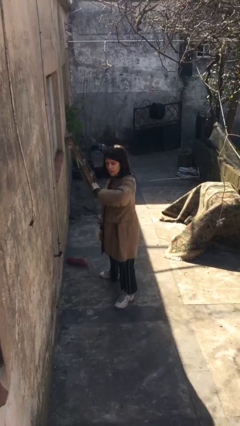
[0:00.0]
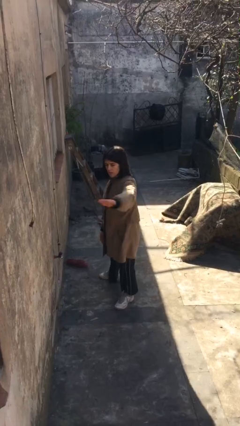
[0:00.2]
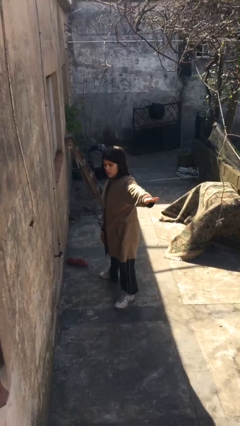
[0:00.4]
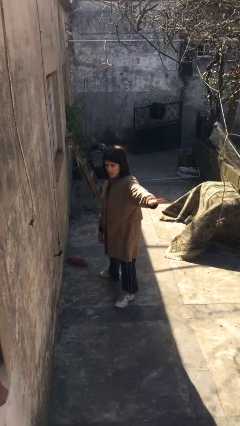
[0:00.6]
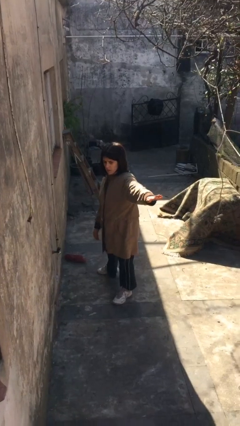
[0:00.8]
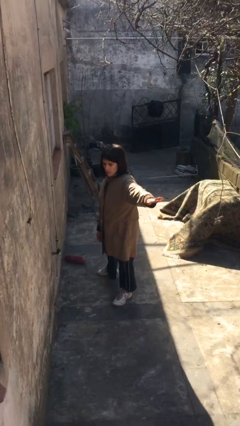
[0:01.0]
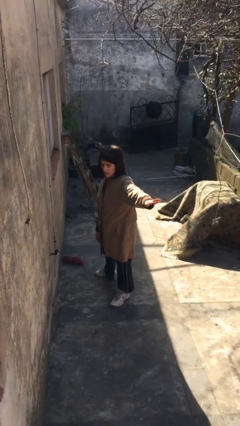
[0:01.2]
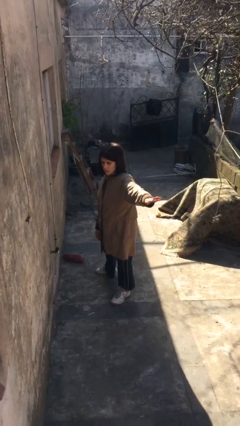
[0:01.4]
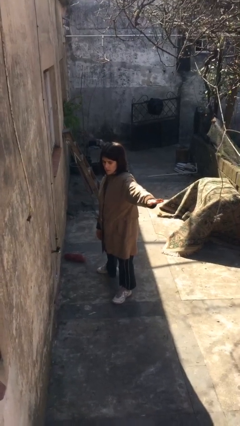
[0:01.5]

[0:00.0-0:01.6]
person karate chop

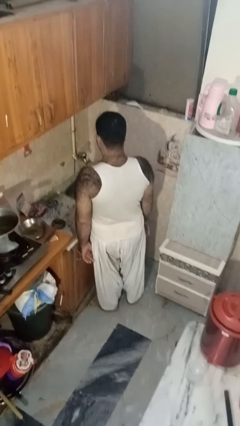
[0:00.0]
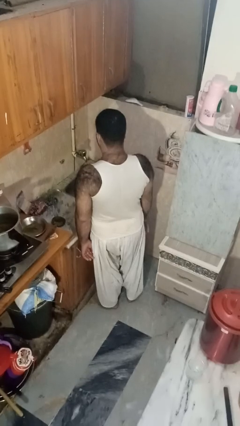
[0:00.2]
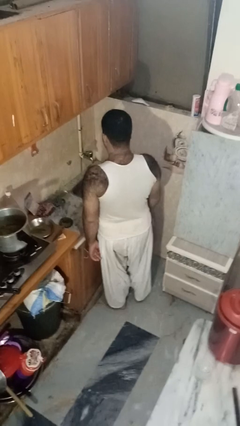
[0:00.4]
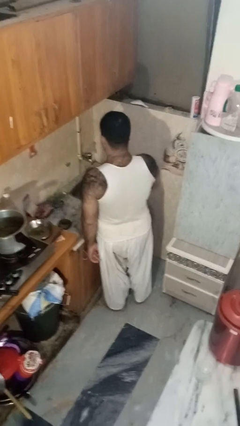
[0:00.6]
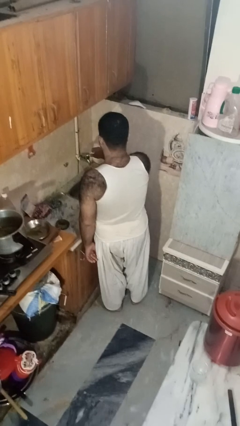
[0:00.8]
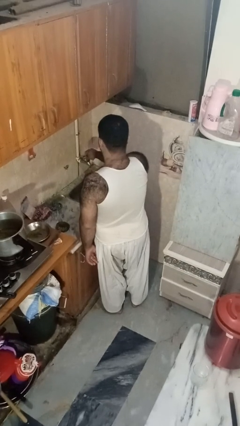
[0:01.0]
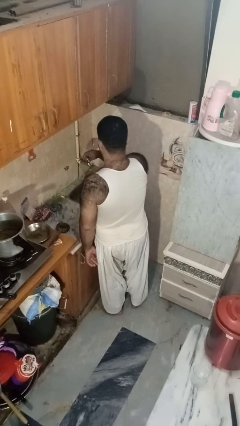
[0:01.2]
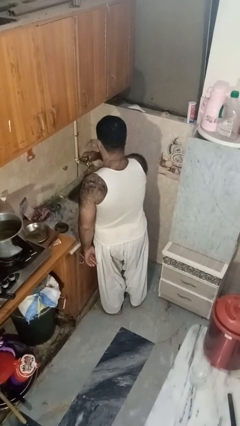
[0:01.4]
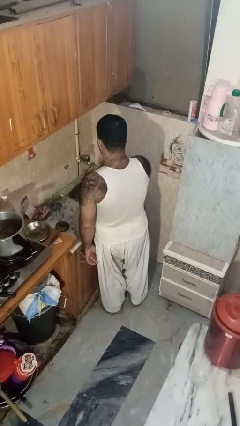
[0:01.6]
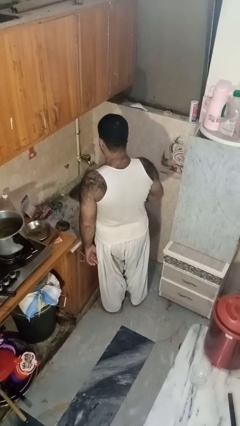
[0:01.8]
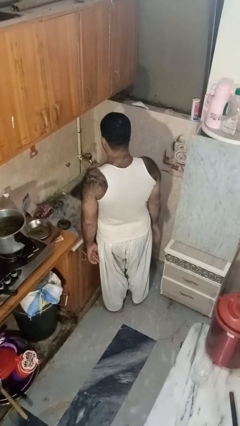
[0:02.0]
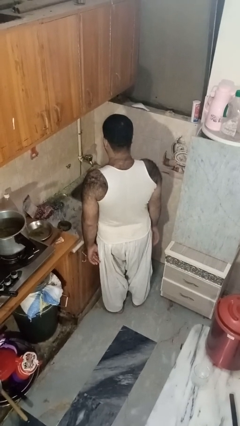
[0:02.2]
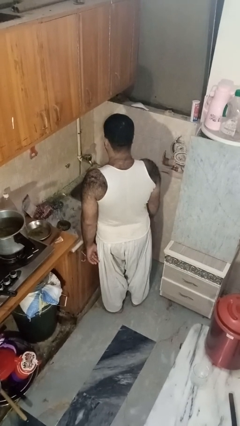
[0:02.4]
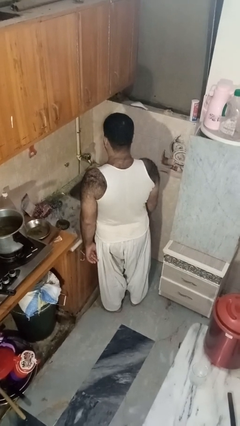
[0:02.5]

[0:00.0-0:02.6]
person turns on faucet

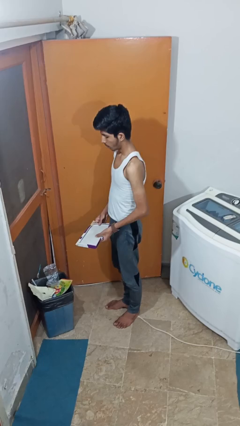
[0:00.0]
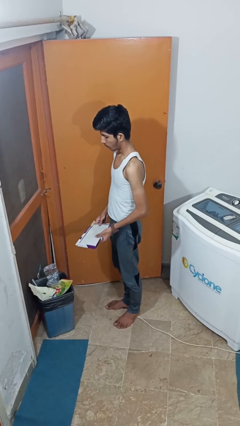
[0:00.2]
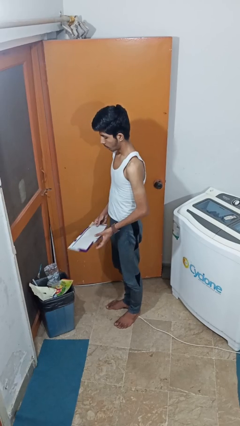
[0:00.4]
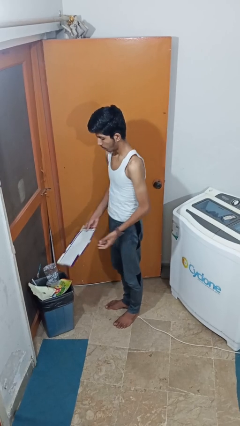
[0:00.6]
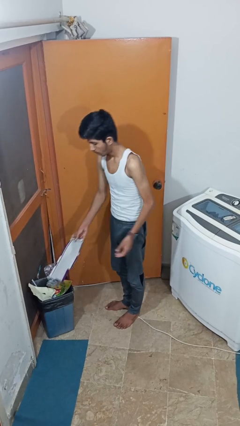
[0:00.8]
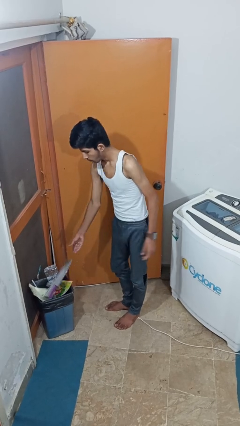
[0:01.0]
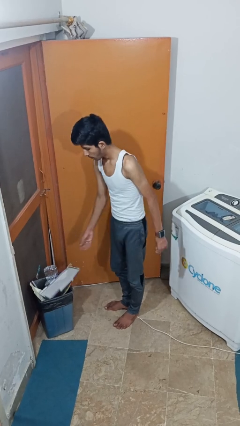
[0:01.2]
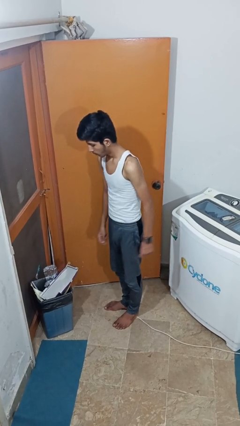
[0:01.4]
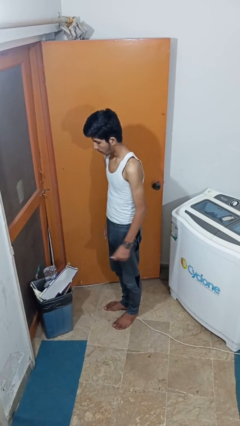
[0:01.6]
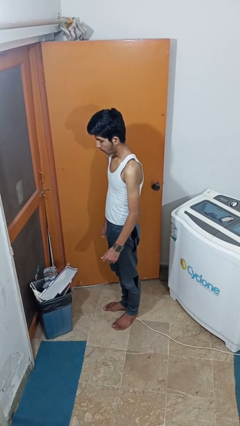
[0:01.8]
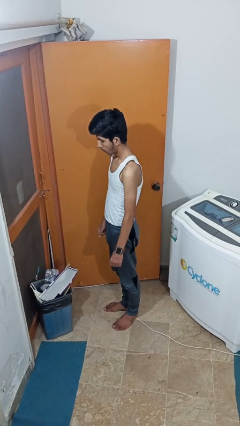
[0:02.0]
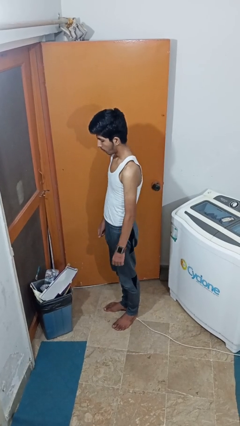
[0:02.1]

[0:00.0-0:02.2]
person discards trash

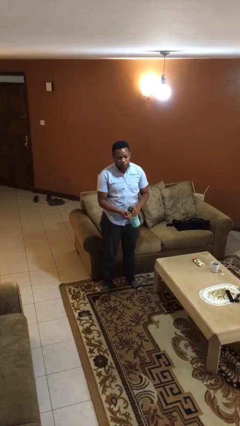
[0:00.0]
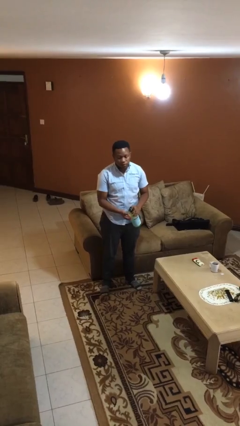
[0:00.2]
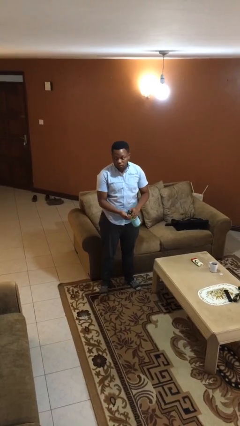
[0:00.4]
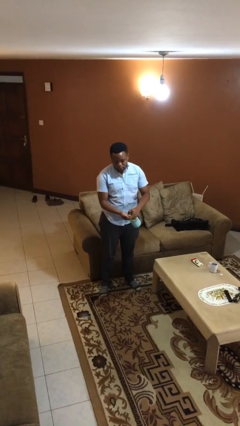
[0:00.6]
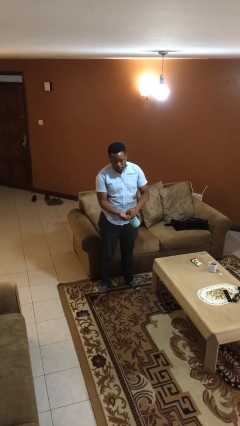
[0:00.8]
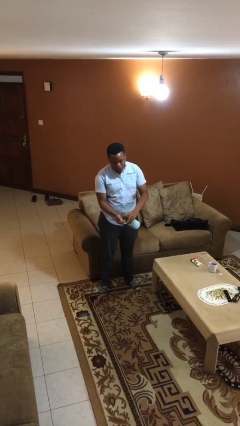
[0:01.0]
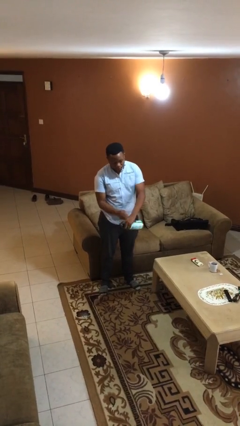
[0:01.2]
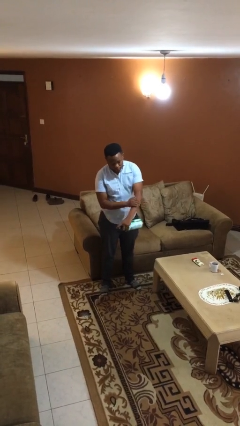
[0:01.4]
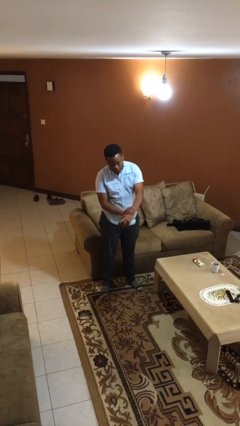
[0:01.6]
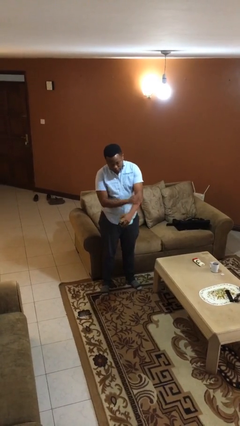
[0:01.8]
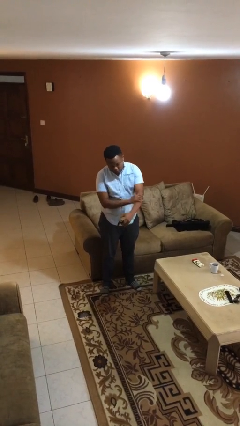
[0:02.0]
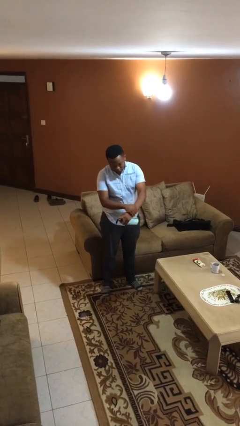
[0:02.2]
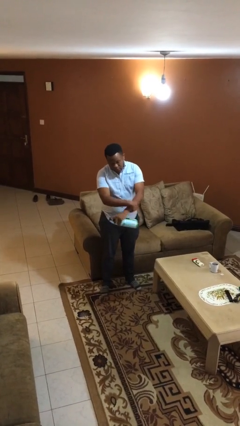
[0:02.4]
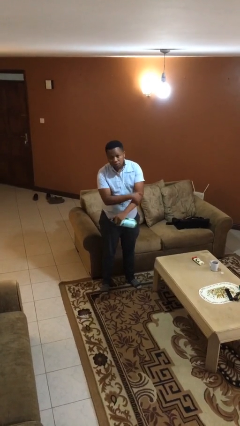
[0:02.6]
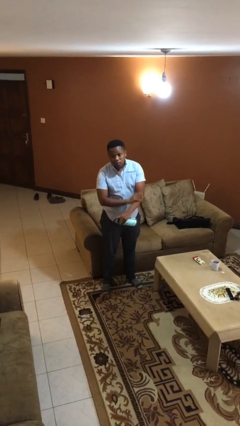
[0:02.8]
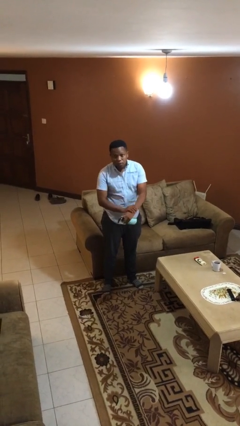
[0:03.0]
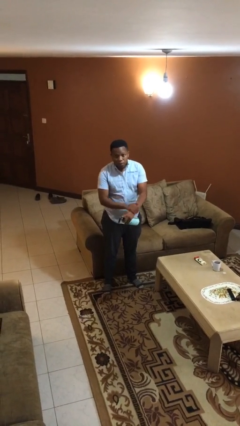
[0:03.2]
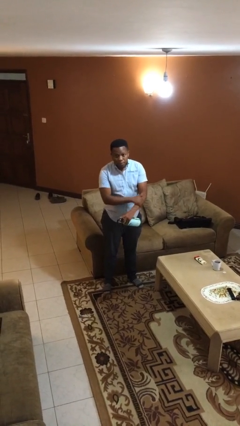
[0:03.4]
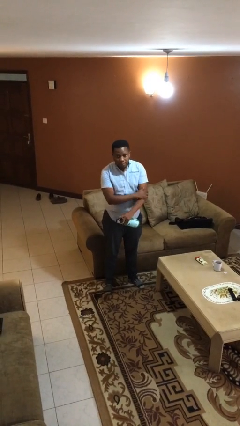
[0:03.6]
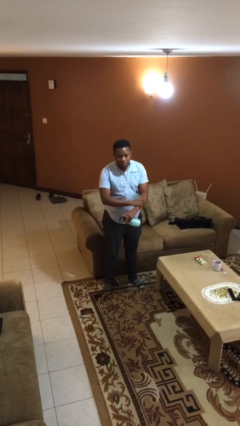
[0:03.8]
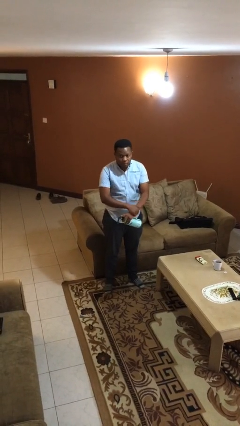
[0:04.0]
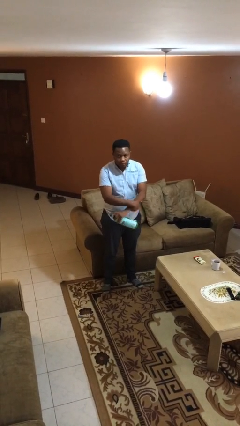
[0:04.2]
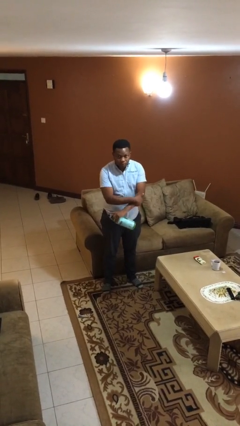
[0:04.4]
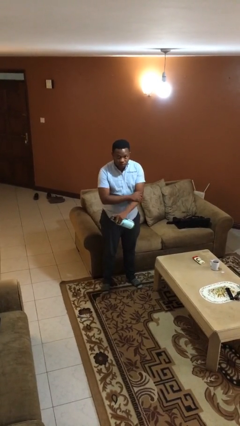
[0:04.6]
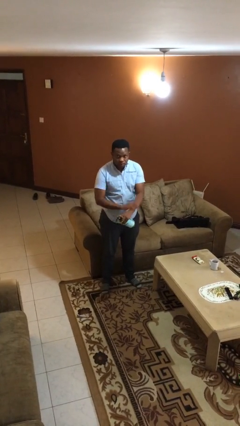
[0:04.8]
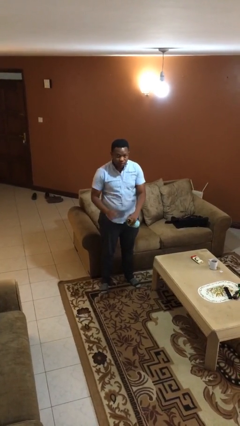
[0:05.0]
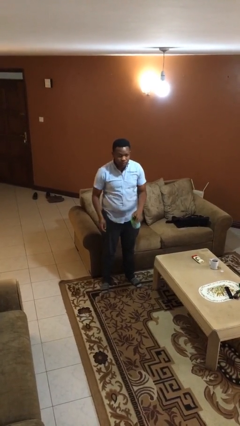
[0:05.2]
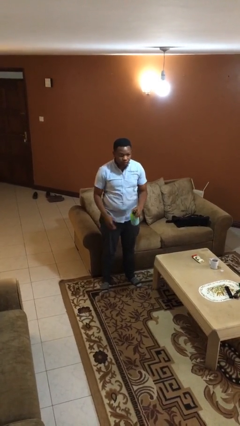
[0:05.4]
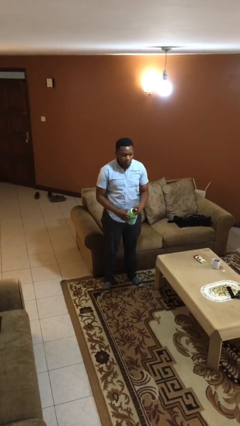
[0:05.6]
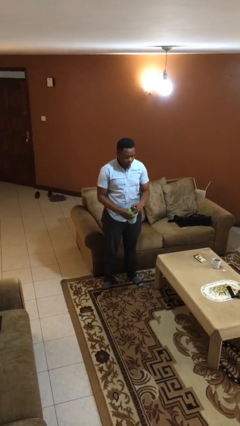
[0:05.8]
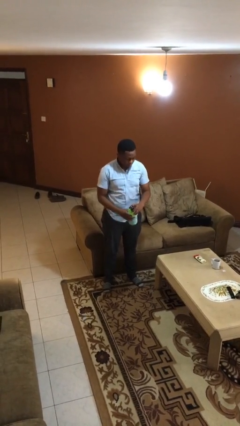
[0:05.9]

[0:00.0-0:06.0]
person applies sunscreen

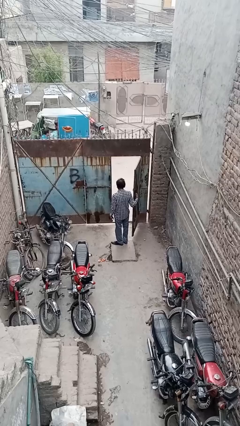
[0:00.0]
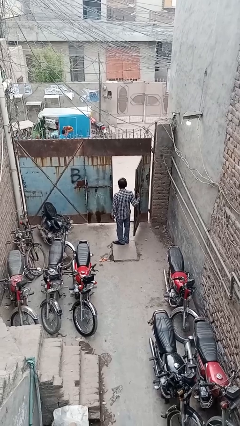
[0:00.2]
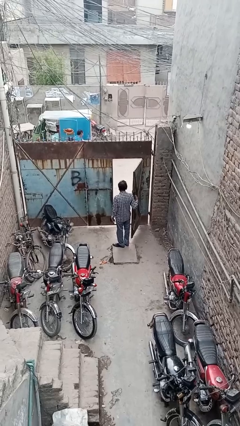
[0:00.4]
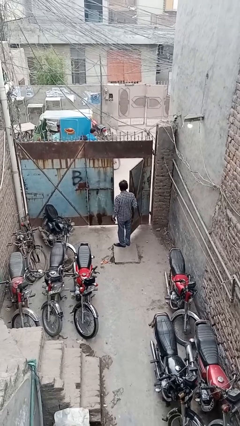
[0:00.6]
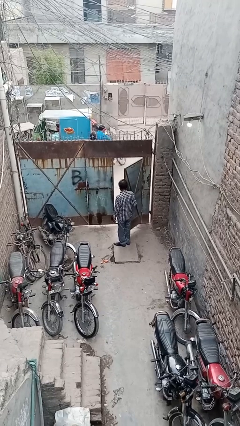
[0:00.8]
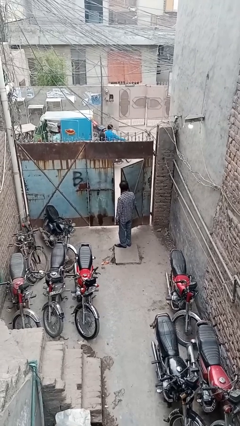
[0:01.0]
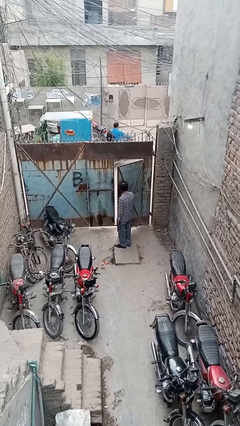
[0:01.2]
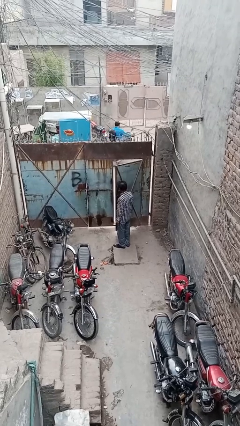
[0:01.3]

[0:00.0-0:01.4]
person closes facility door

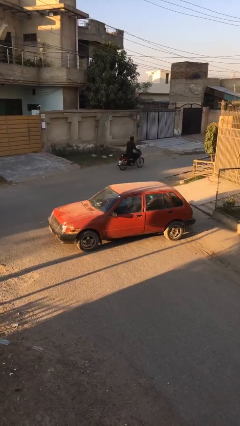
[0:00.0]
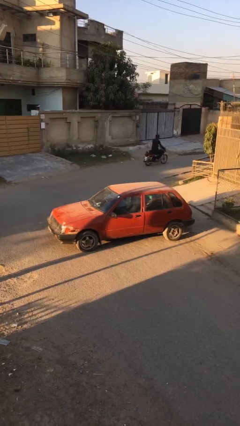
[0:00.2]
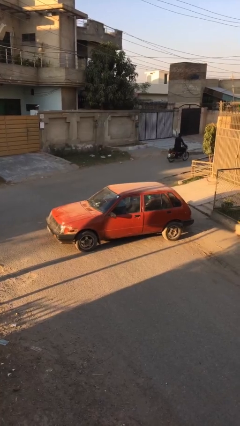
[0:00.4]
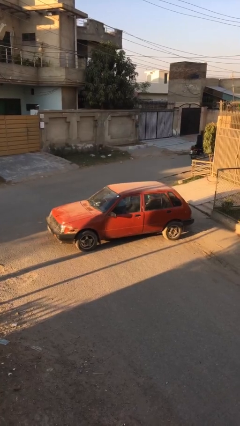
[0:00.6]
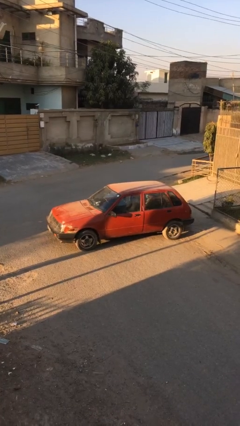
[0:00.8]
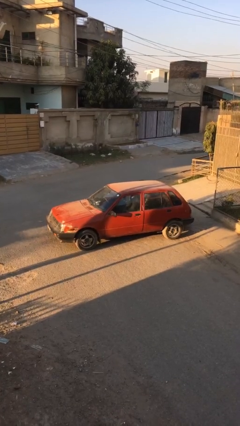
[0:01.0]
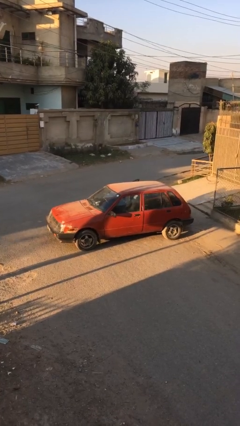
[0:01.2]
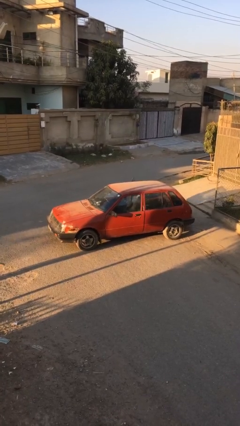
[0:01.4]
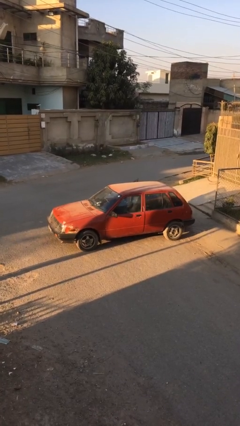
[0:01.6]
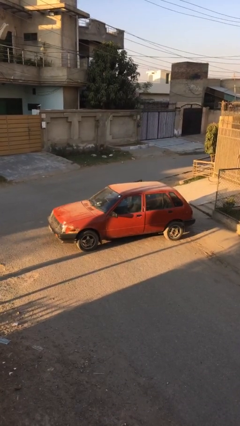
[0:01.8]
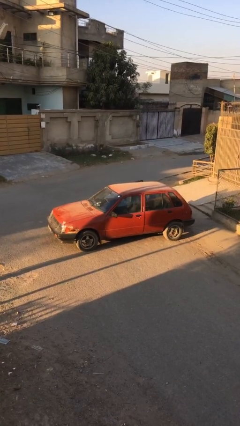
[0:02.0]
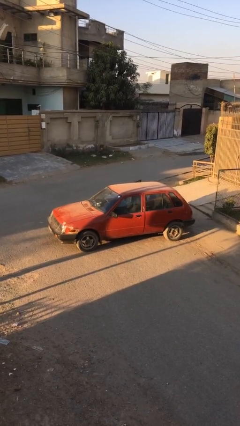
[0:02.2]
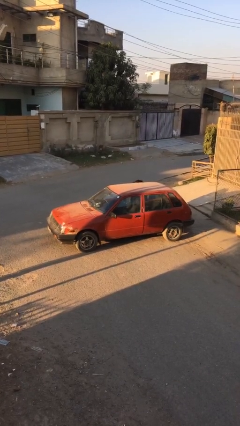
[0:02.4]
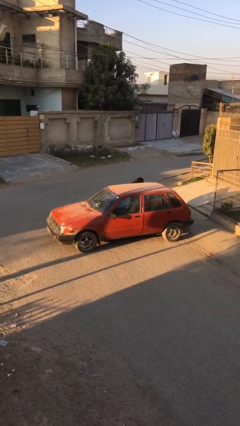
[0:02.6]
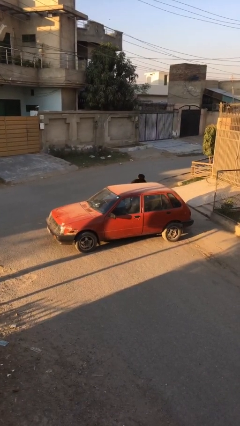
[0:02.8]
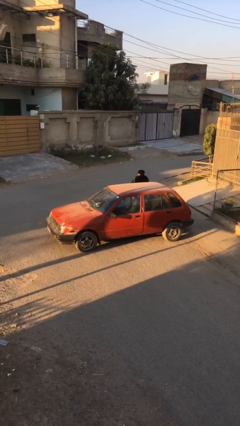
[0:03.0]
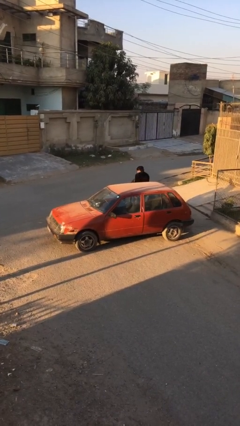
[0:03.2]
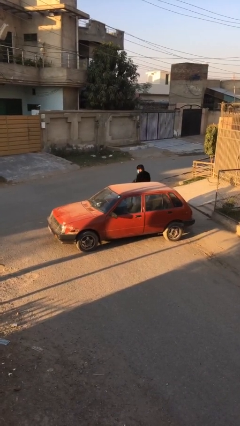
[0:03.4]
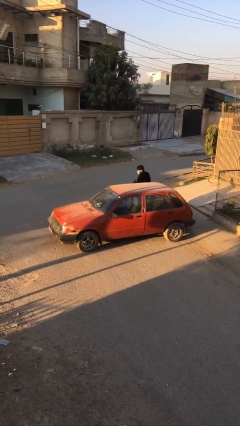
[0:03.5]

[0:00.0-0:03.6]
car drops off person
